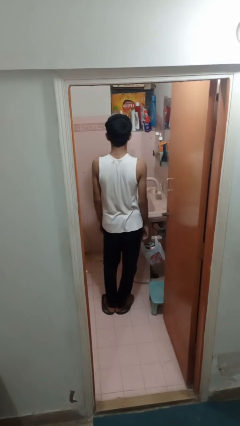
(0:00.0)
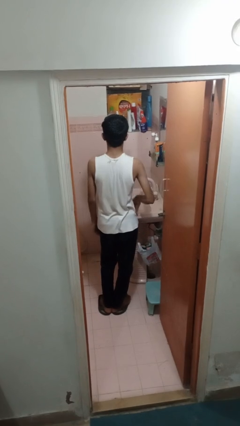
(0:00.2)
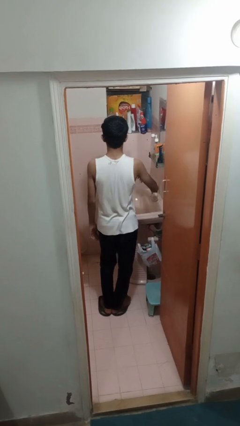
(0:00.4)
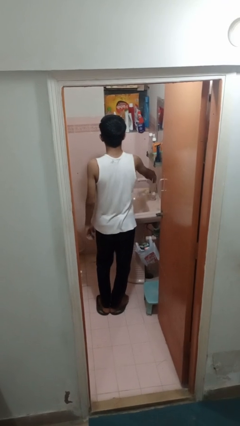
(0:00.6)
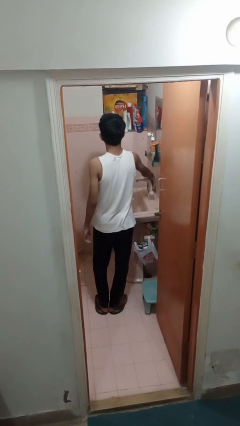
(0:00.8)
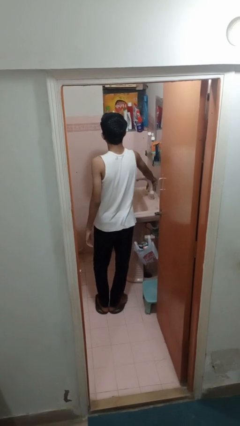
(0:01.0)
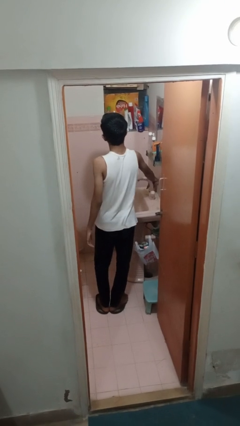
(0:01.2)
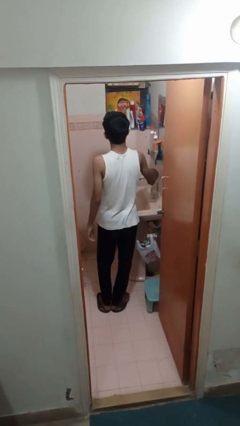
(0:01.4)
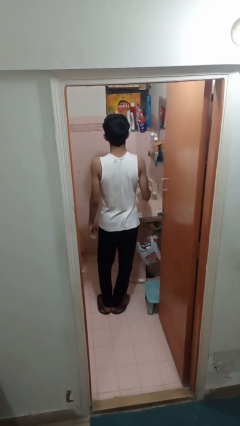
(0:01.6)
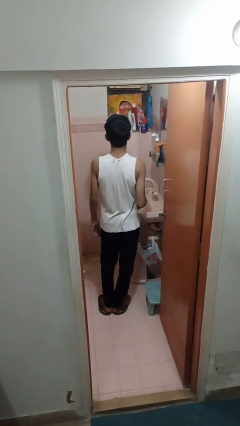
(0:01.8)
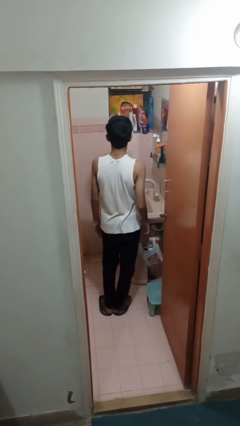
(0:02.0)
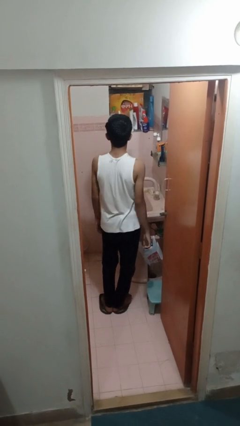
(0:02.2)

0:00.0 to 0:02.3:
person turns off faucet

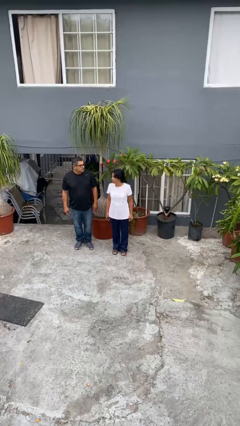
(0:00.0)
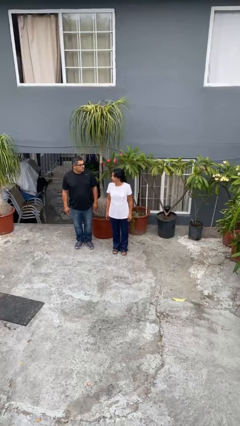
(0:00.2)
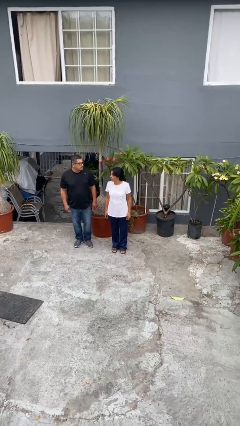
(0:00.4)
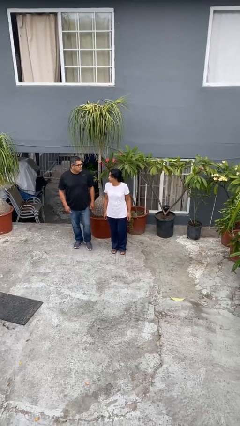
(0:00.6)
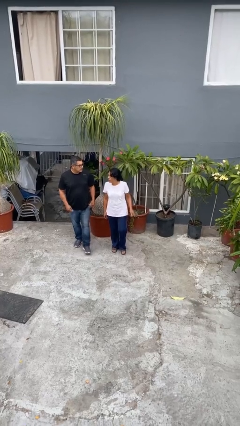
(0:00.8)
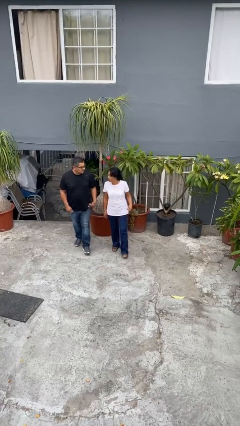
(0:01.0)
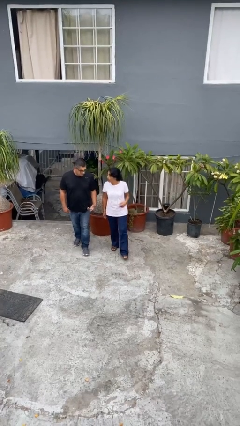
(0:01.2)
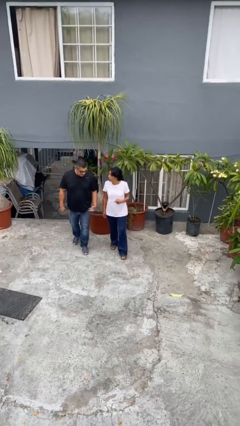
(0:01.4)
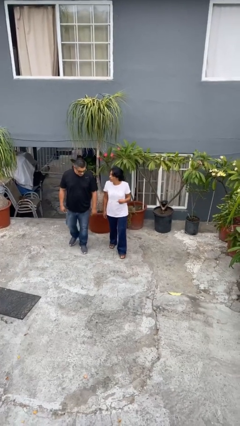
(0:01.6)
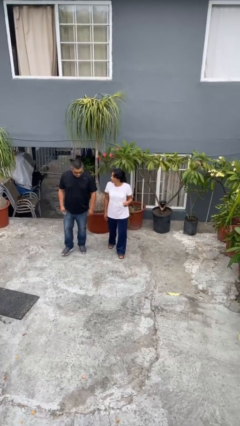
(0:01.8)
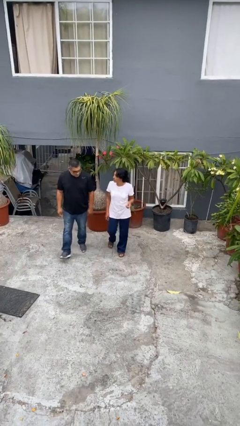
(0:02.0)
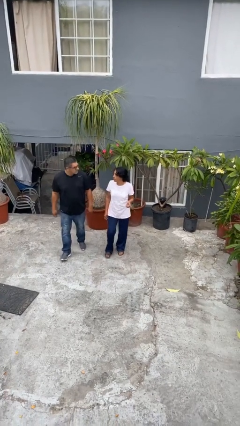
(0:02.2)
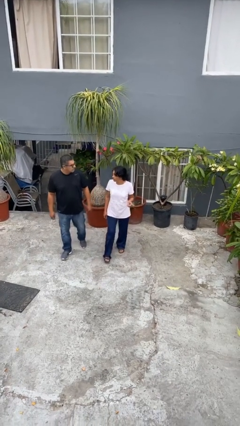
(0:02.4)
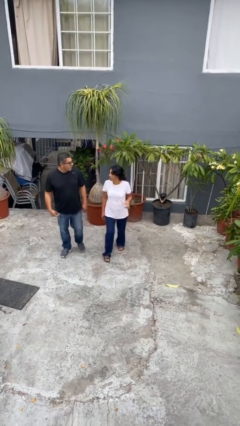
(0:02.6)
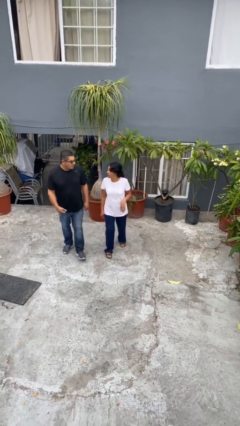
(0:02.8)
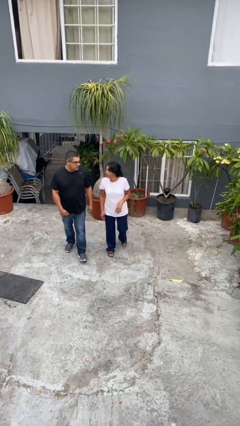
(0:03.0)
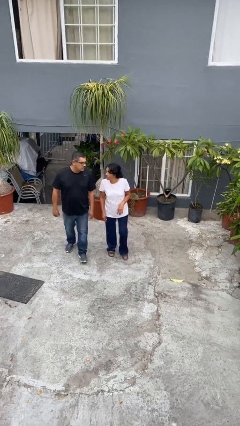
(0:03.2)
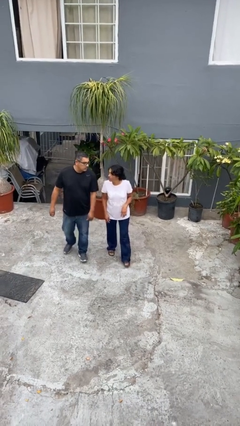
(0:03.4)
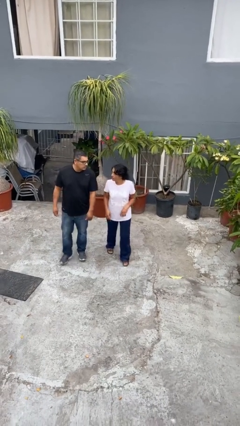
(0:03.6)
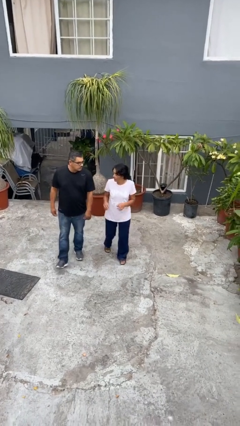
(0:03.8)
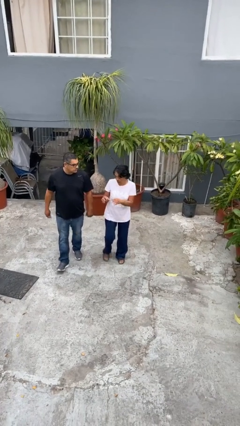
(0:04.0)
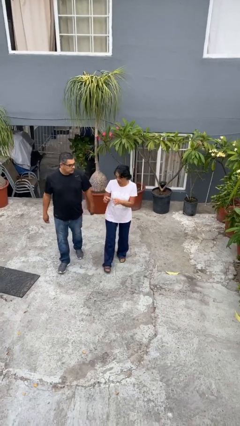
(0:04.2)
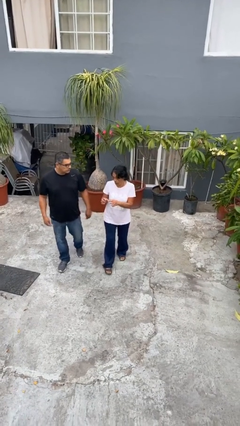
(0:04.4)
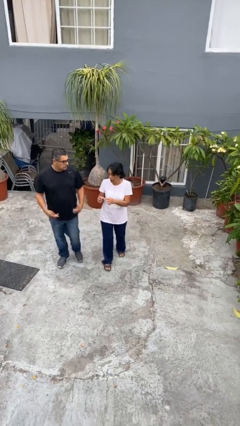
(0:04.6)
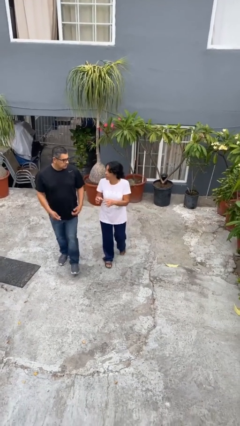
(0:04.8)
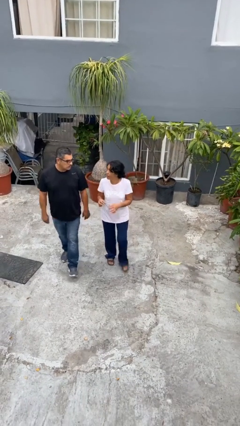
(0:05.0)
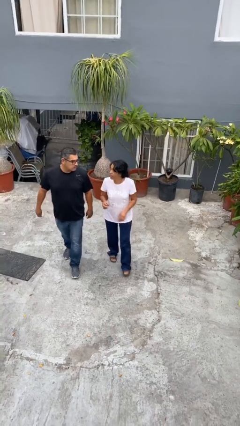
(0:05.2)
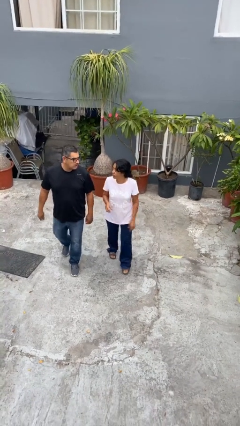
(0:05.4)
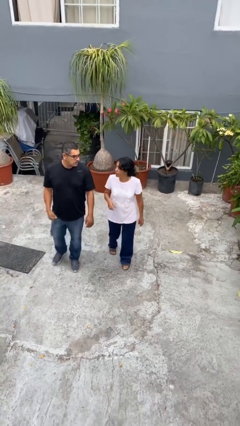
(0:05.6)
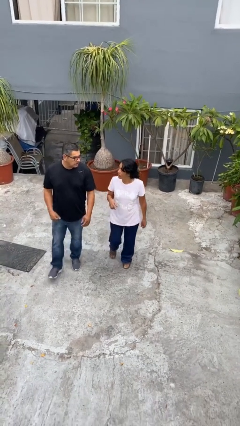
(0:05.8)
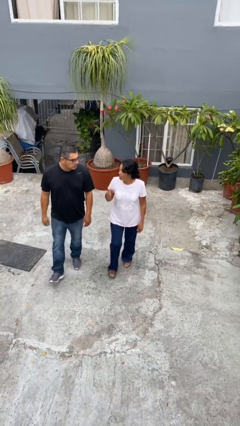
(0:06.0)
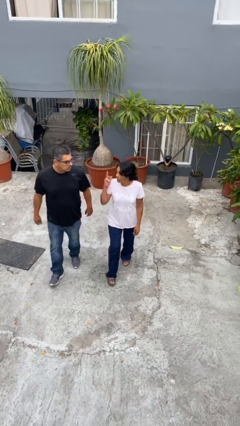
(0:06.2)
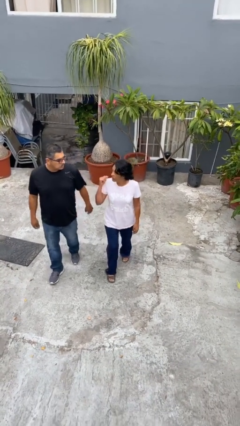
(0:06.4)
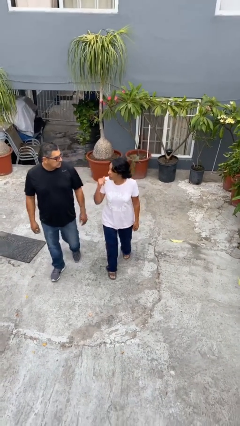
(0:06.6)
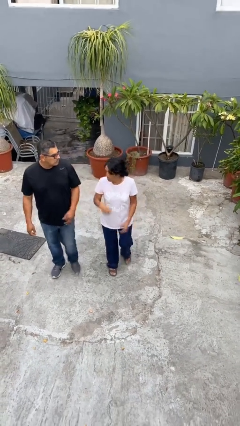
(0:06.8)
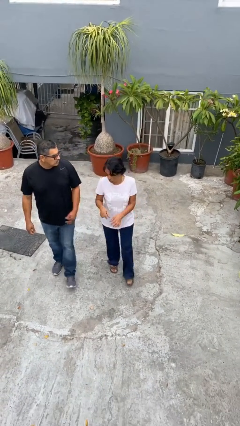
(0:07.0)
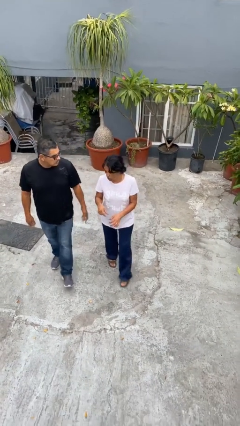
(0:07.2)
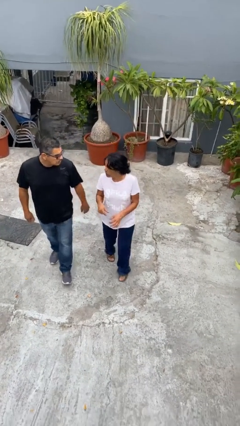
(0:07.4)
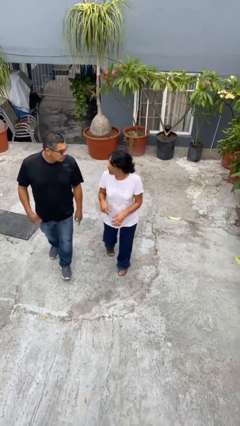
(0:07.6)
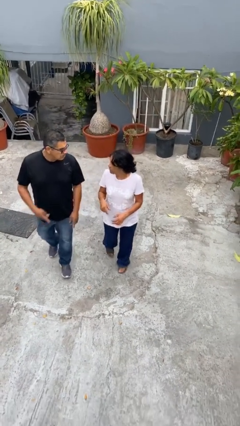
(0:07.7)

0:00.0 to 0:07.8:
person talks to person

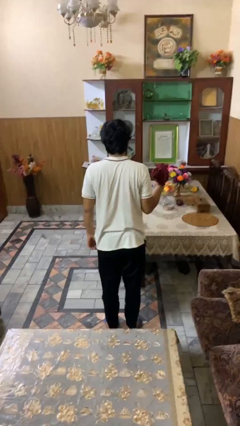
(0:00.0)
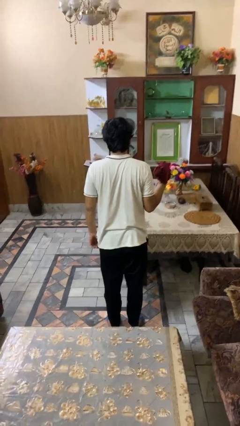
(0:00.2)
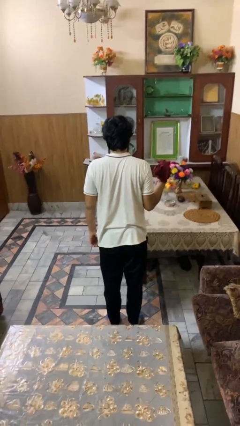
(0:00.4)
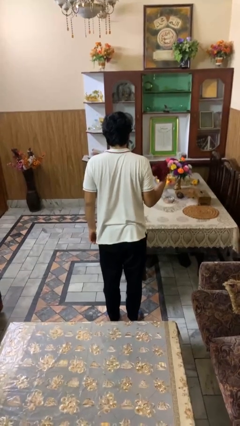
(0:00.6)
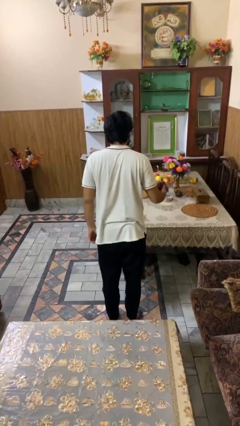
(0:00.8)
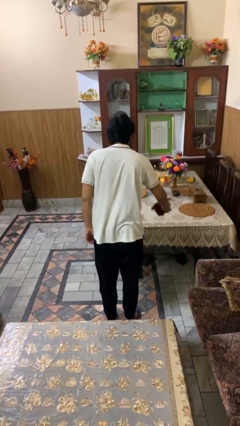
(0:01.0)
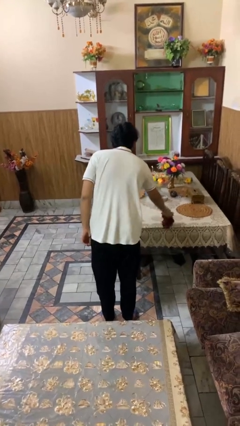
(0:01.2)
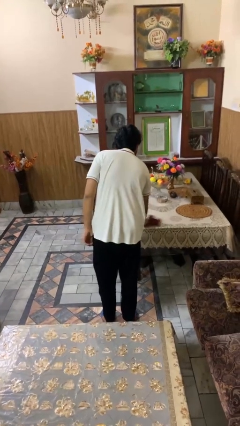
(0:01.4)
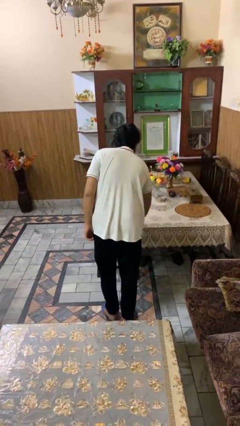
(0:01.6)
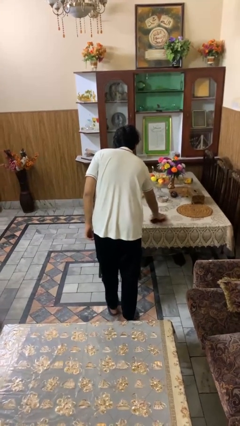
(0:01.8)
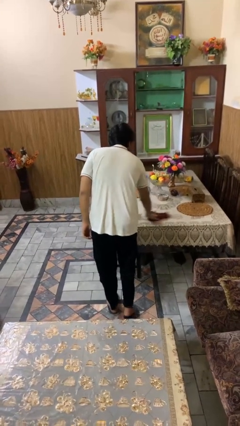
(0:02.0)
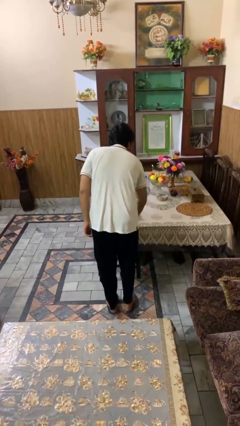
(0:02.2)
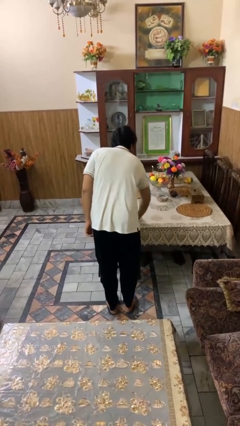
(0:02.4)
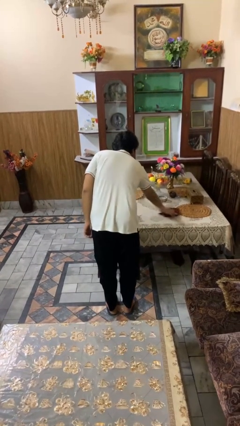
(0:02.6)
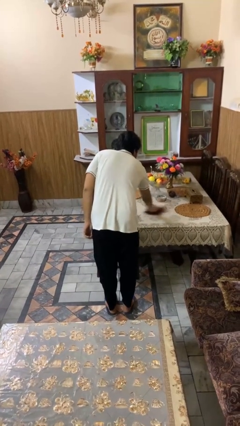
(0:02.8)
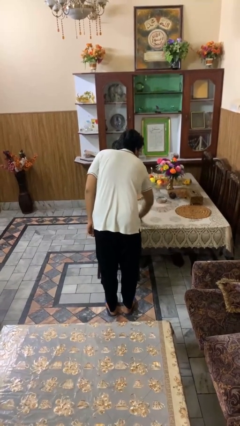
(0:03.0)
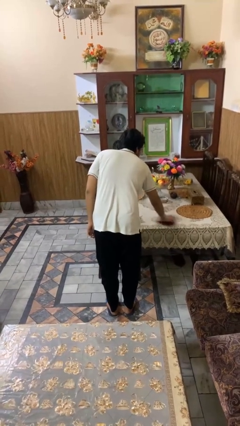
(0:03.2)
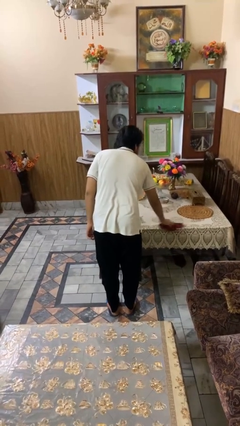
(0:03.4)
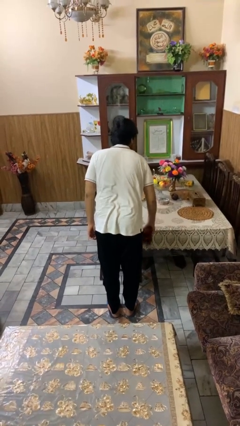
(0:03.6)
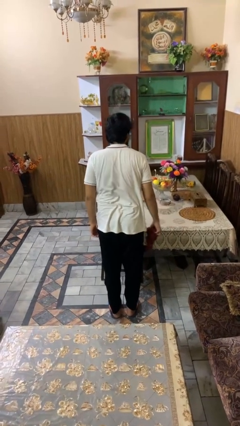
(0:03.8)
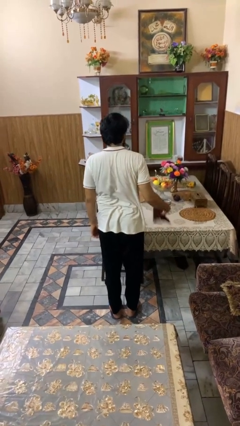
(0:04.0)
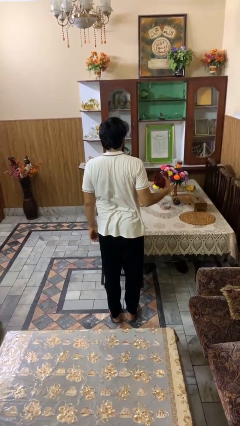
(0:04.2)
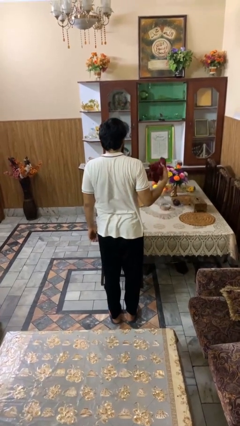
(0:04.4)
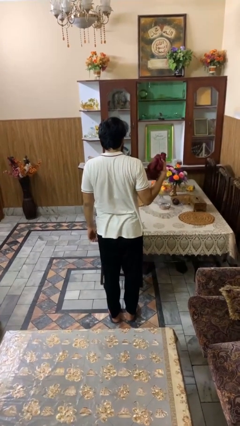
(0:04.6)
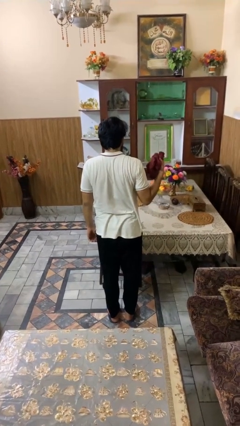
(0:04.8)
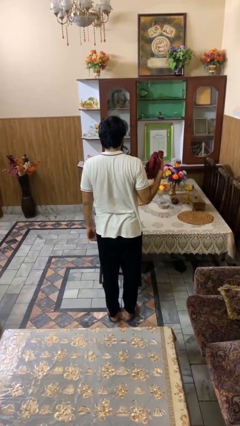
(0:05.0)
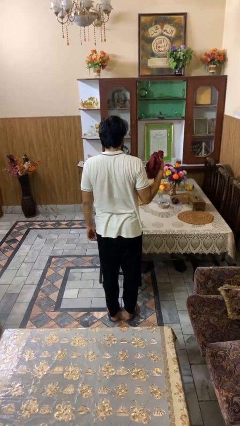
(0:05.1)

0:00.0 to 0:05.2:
person cleans table with rag

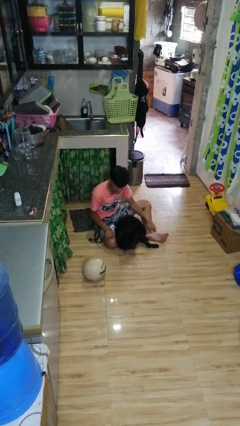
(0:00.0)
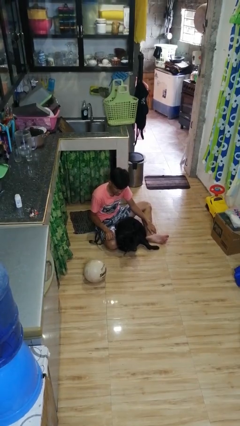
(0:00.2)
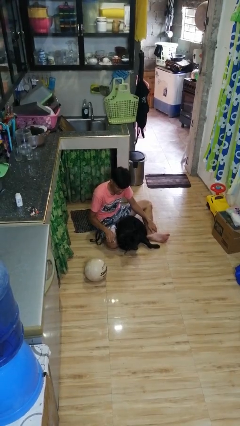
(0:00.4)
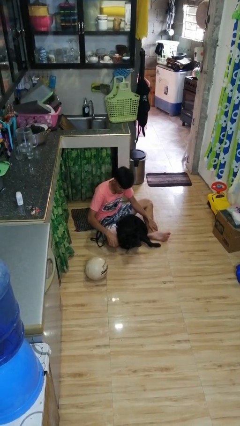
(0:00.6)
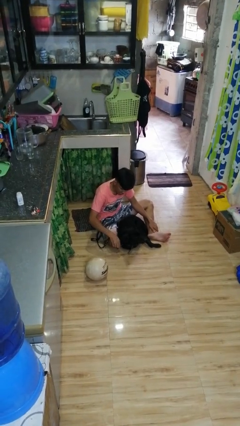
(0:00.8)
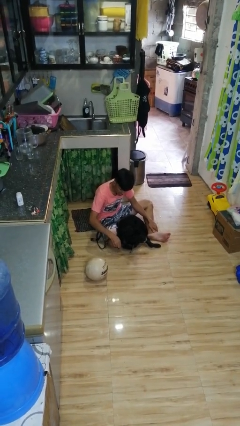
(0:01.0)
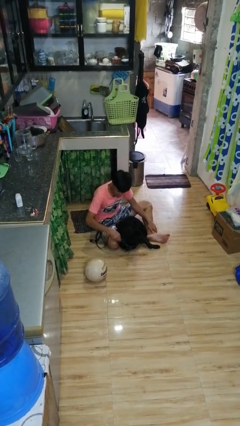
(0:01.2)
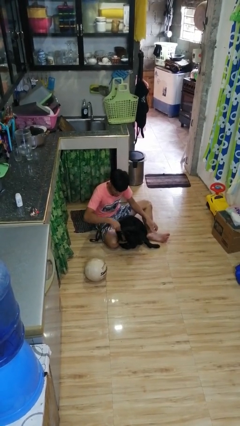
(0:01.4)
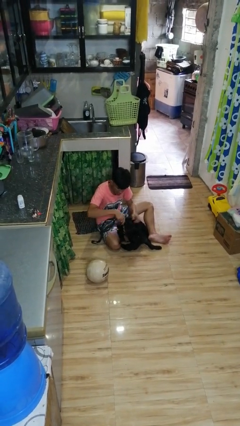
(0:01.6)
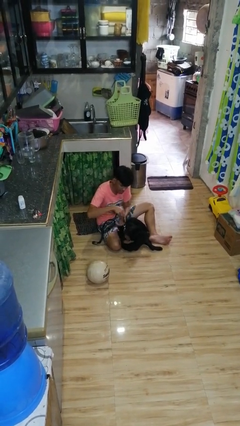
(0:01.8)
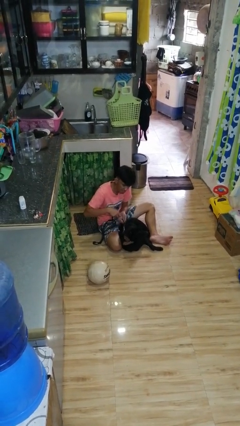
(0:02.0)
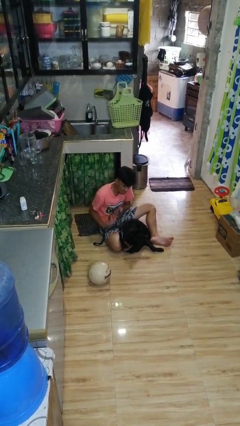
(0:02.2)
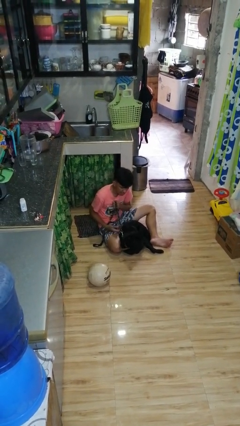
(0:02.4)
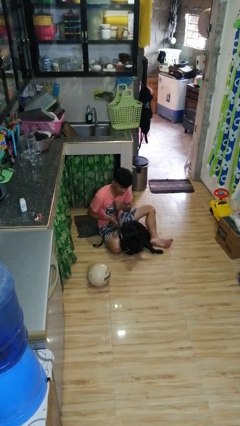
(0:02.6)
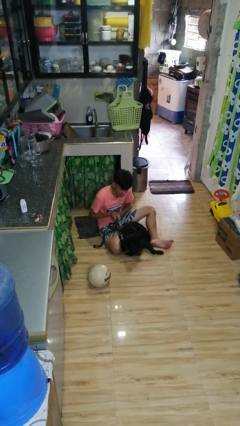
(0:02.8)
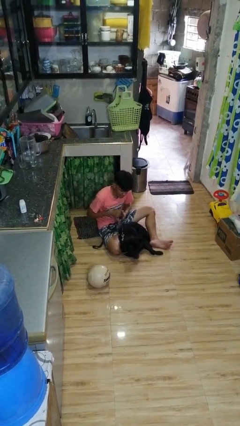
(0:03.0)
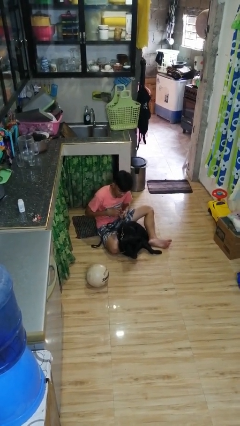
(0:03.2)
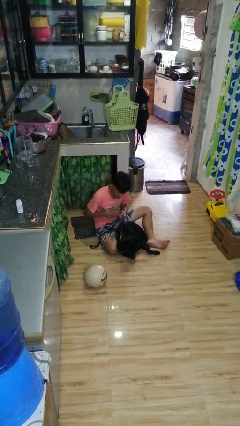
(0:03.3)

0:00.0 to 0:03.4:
person attaches leash to dog
